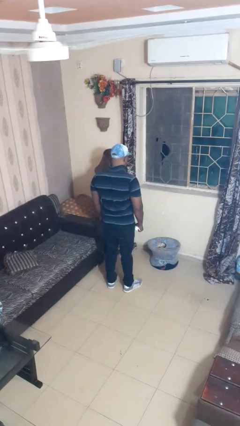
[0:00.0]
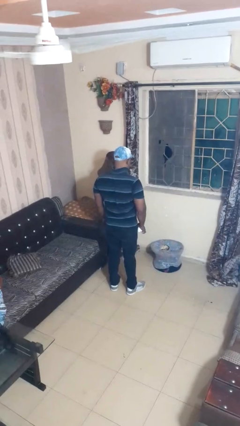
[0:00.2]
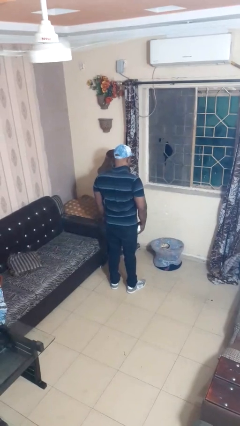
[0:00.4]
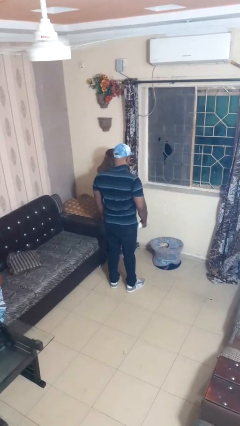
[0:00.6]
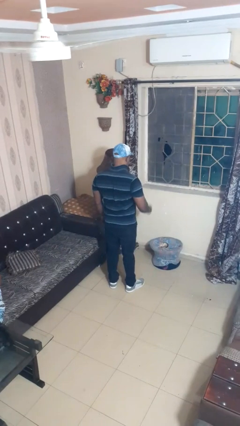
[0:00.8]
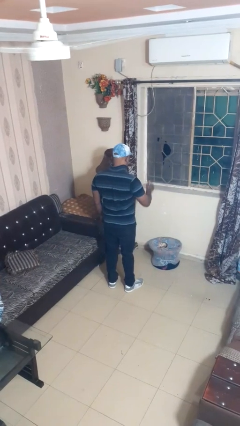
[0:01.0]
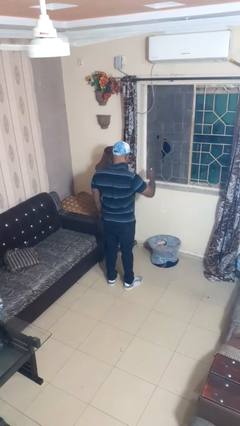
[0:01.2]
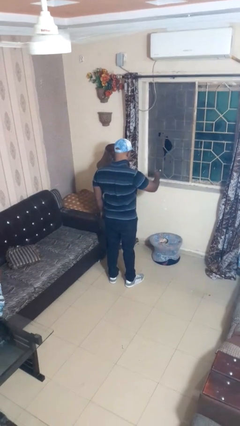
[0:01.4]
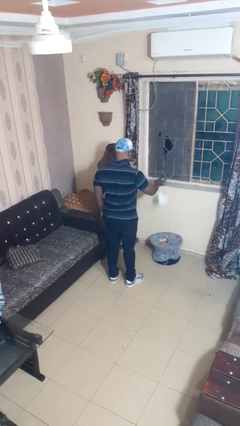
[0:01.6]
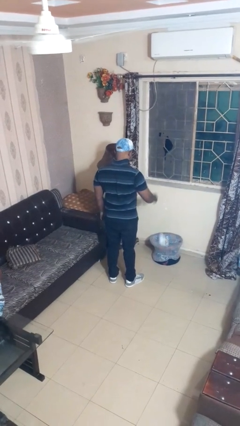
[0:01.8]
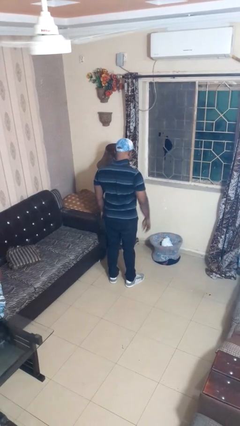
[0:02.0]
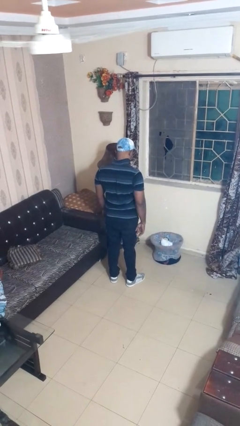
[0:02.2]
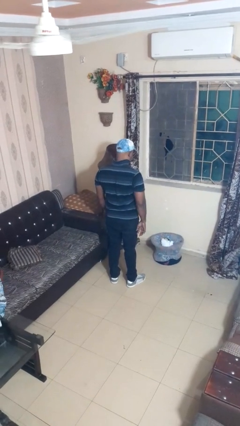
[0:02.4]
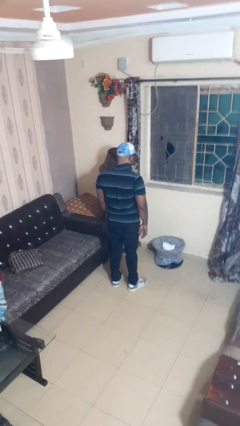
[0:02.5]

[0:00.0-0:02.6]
person puts object into basket

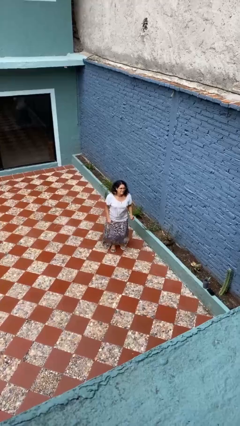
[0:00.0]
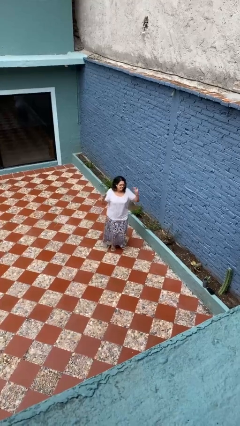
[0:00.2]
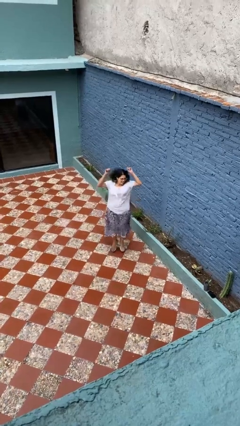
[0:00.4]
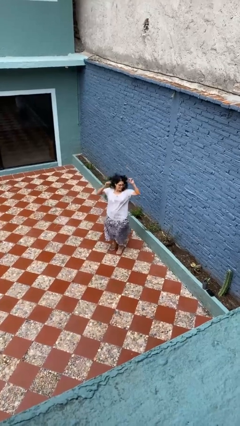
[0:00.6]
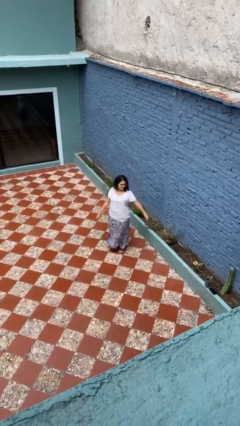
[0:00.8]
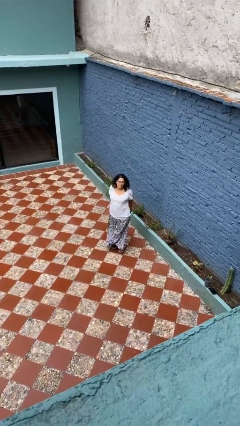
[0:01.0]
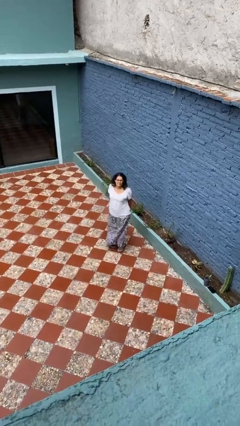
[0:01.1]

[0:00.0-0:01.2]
person jumps

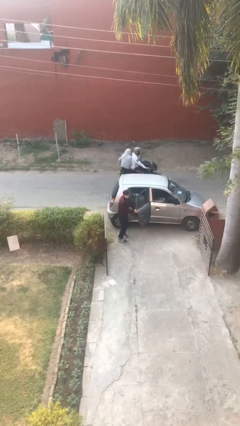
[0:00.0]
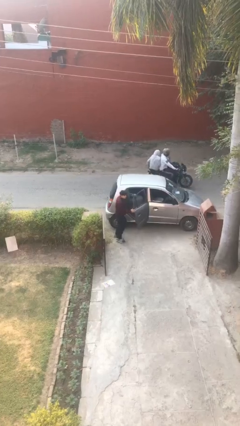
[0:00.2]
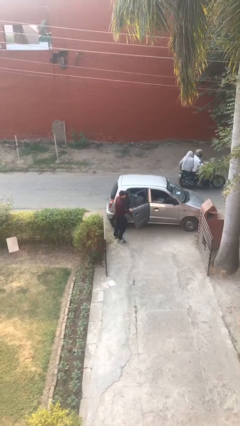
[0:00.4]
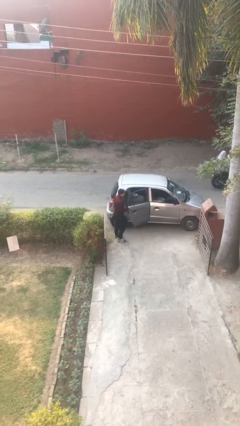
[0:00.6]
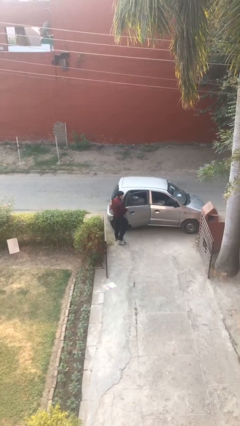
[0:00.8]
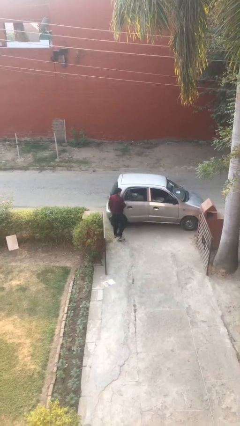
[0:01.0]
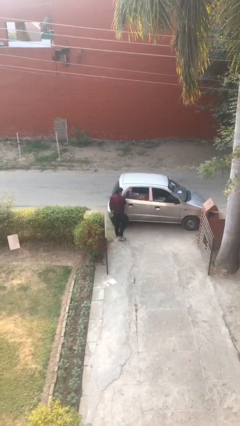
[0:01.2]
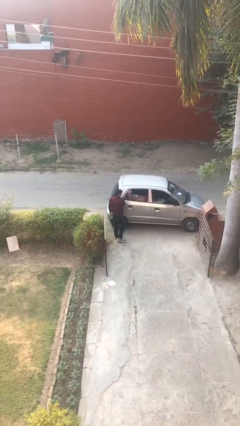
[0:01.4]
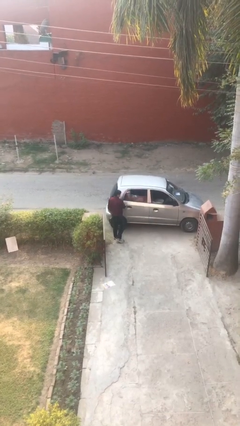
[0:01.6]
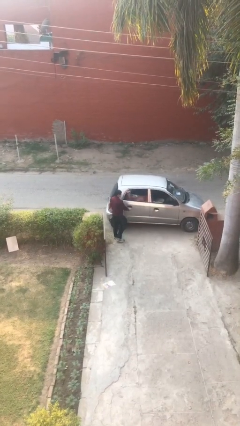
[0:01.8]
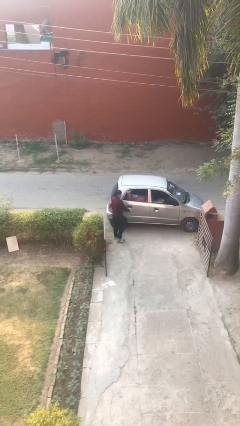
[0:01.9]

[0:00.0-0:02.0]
person closes car door

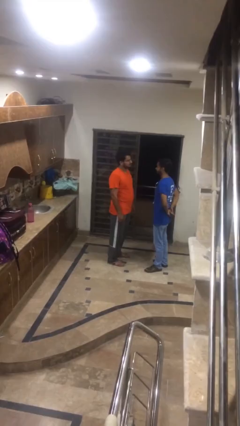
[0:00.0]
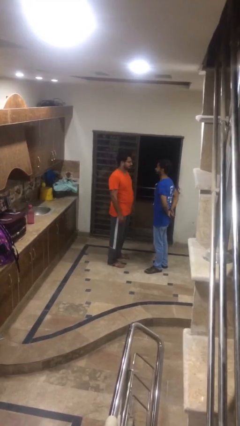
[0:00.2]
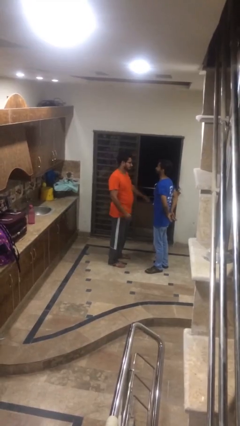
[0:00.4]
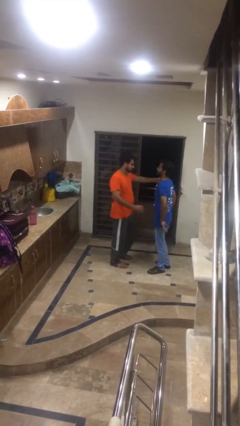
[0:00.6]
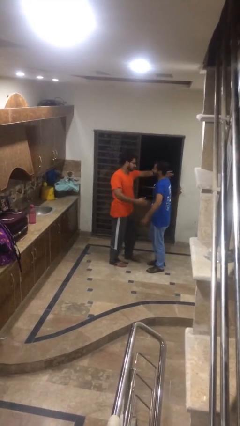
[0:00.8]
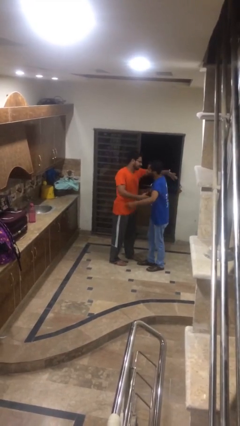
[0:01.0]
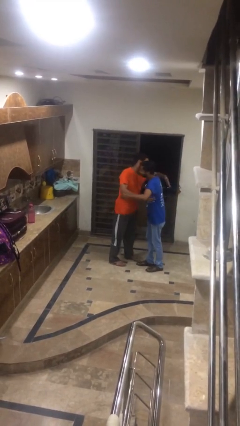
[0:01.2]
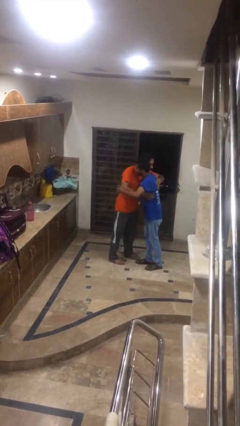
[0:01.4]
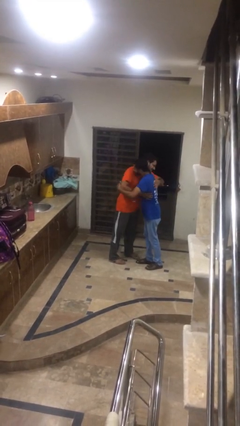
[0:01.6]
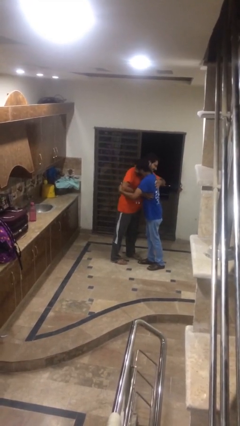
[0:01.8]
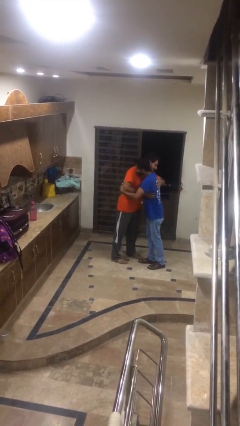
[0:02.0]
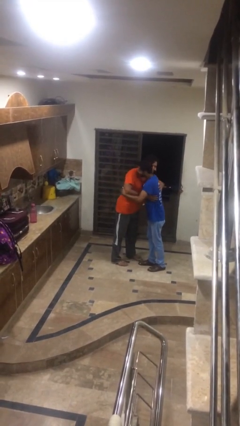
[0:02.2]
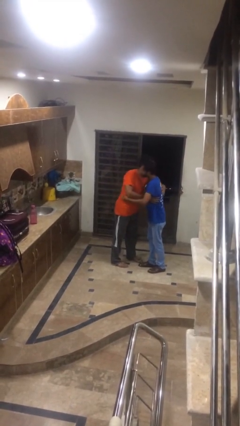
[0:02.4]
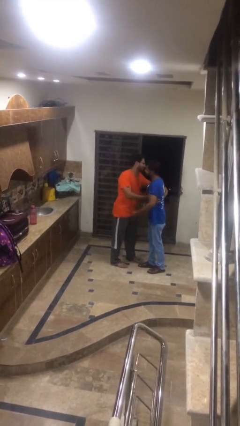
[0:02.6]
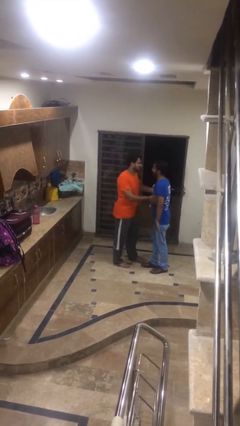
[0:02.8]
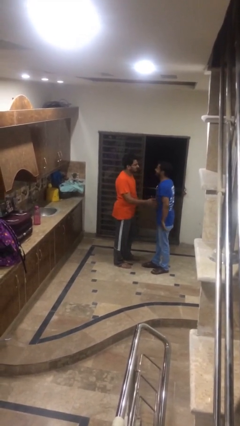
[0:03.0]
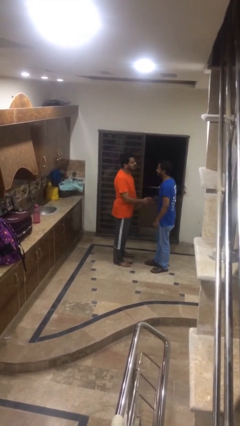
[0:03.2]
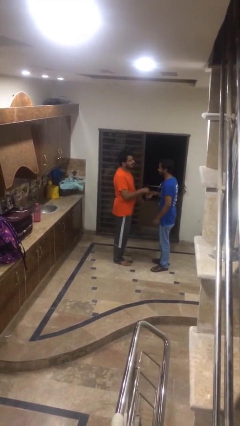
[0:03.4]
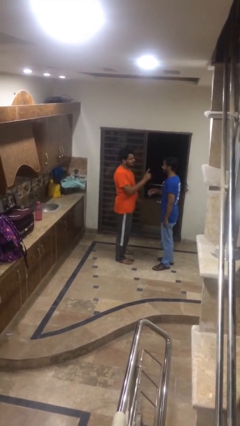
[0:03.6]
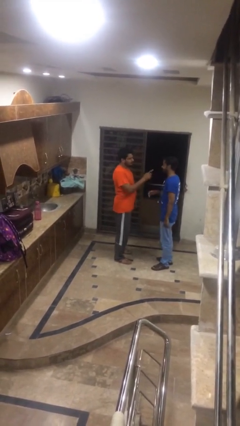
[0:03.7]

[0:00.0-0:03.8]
person embraces person

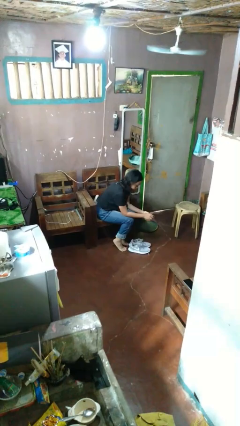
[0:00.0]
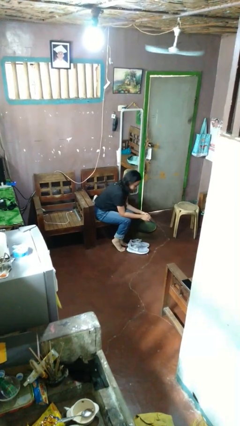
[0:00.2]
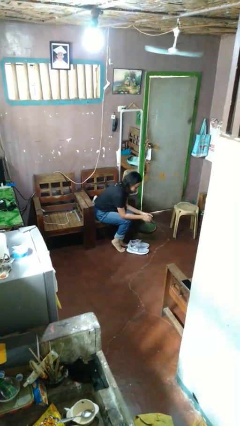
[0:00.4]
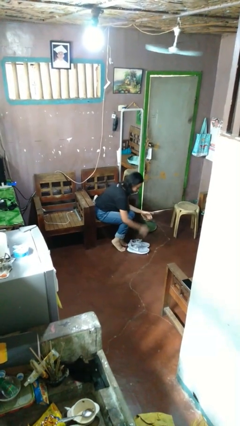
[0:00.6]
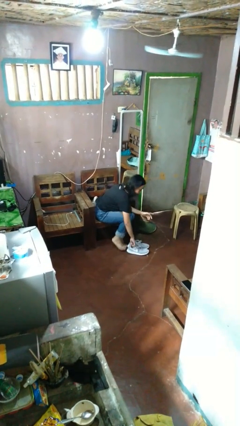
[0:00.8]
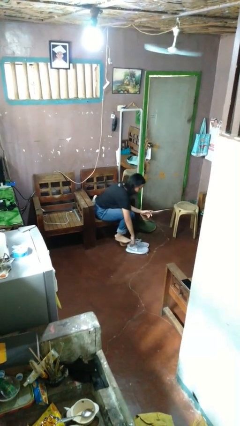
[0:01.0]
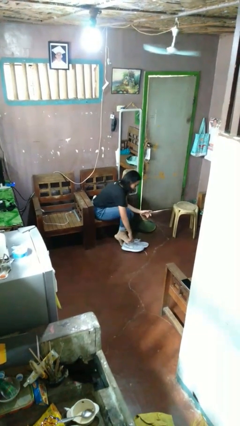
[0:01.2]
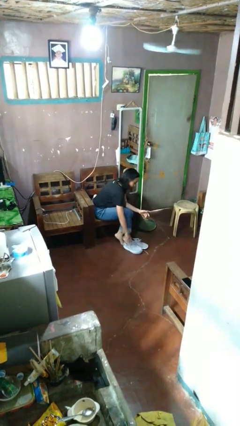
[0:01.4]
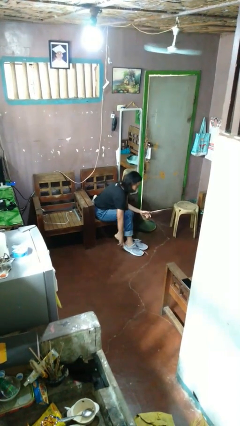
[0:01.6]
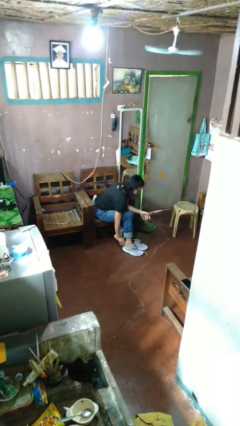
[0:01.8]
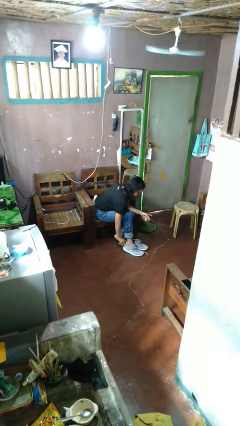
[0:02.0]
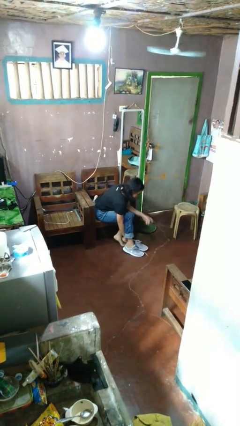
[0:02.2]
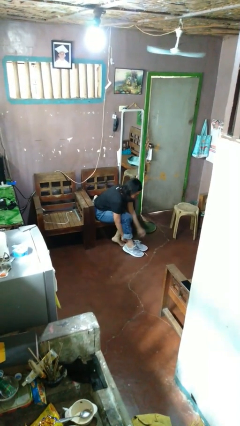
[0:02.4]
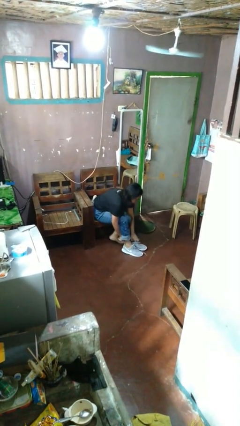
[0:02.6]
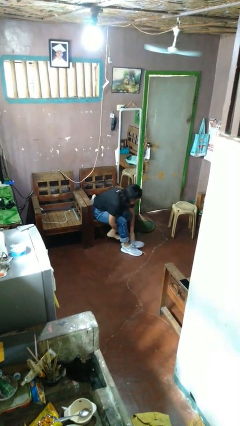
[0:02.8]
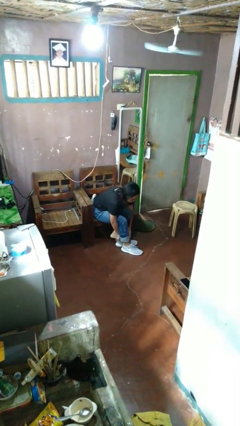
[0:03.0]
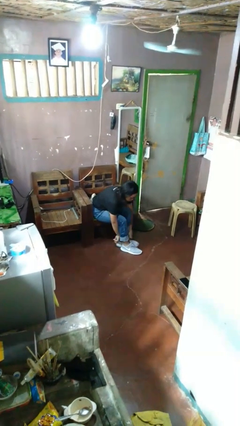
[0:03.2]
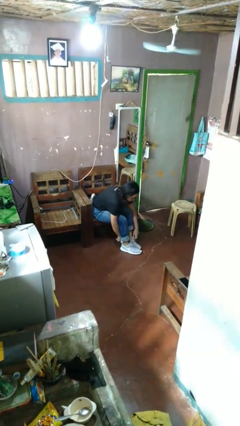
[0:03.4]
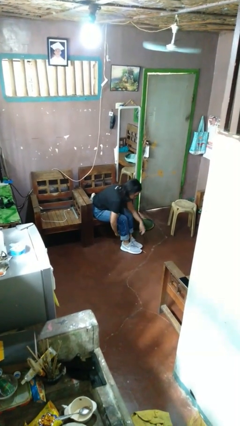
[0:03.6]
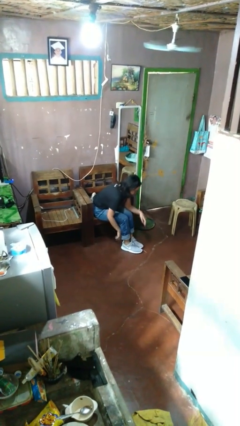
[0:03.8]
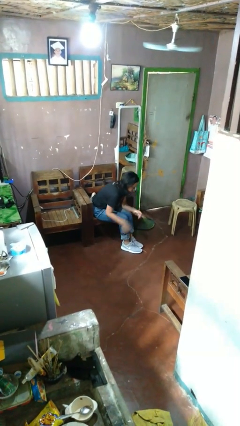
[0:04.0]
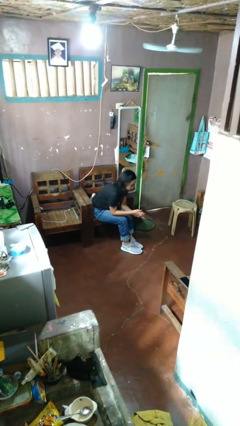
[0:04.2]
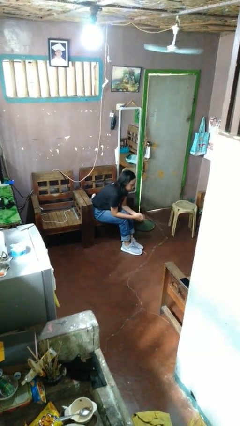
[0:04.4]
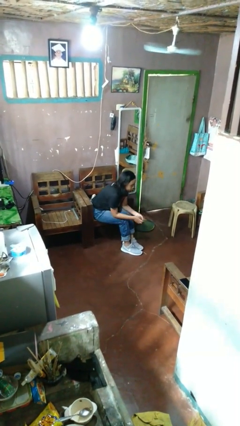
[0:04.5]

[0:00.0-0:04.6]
person puts on shoes

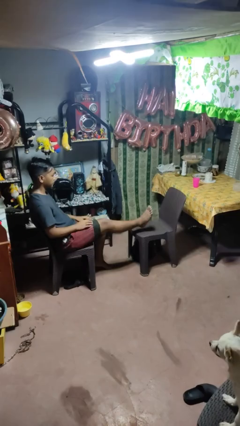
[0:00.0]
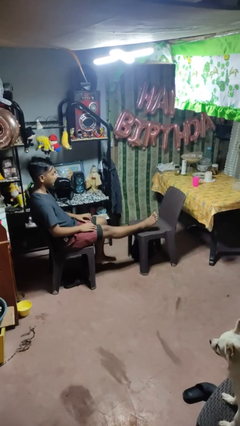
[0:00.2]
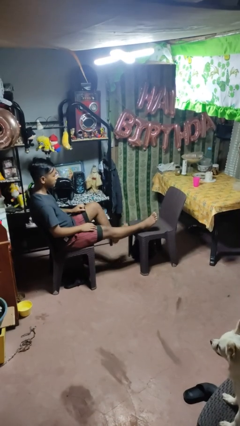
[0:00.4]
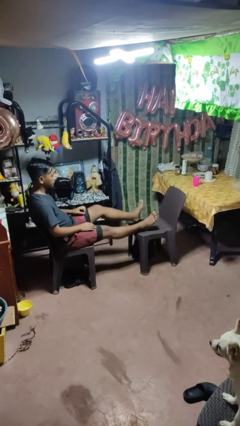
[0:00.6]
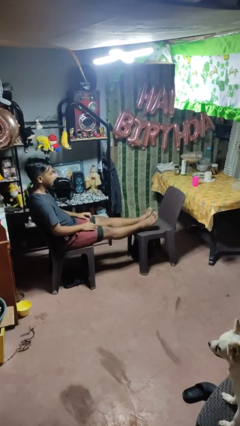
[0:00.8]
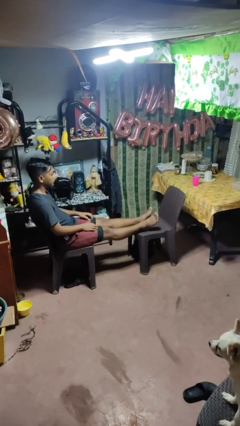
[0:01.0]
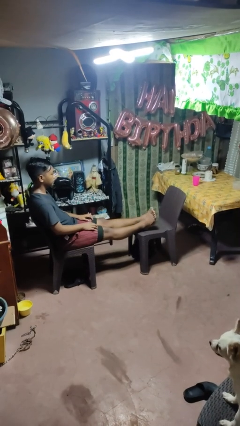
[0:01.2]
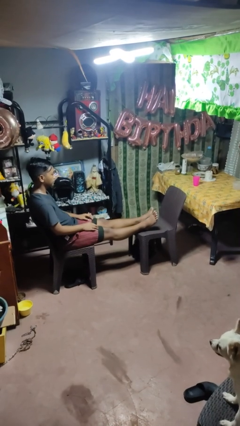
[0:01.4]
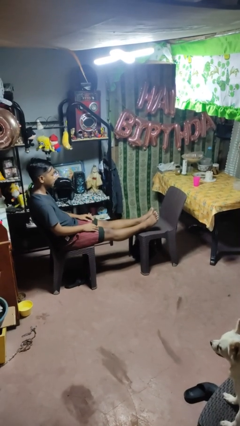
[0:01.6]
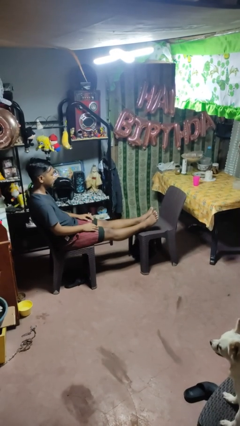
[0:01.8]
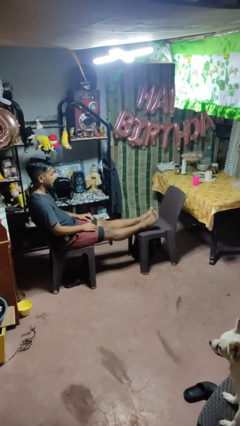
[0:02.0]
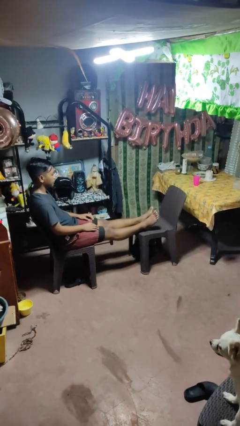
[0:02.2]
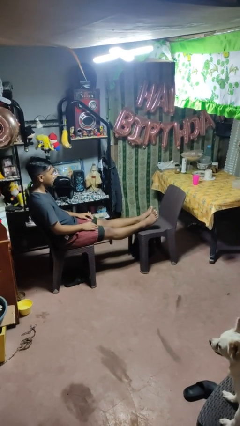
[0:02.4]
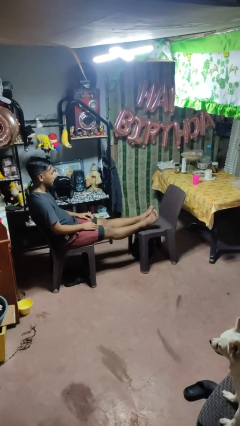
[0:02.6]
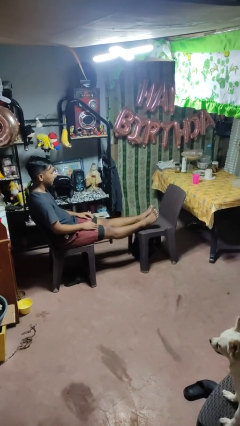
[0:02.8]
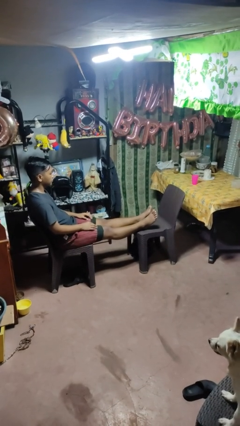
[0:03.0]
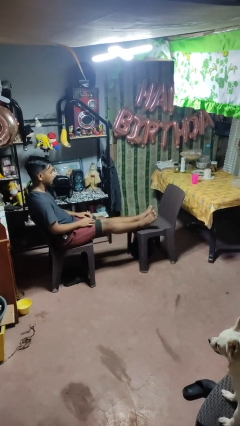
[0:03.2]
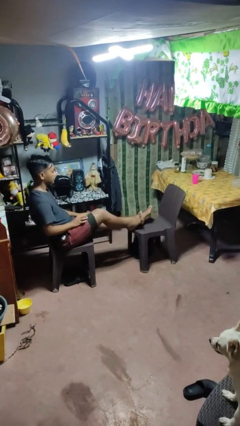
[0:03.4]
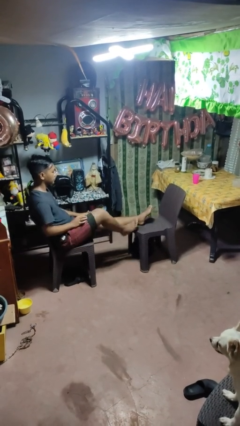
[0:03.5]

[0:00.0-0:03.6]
person puts feet up
